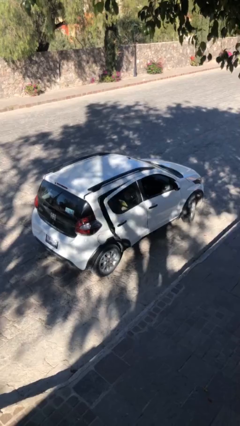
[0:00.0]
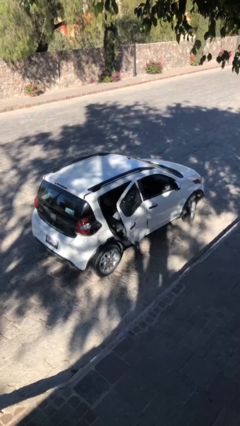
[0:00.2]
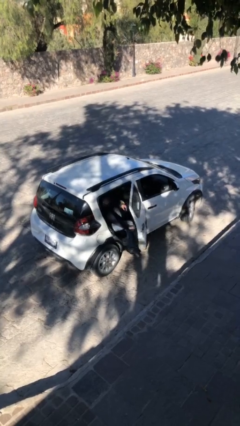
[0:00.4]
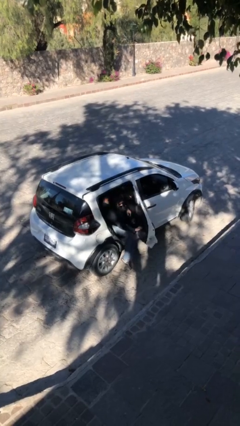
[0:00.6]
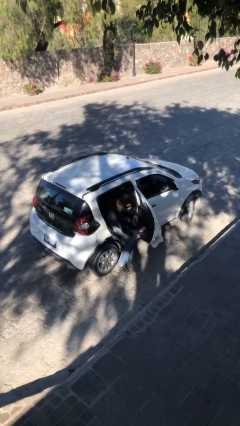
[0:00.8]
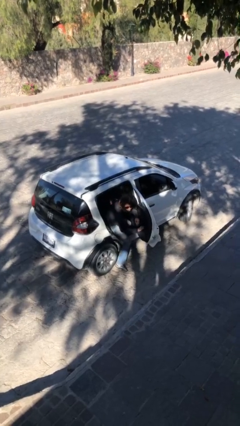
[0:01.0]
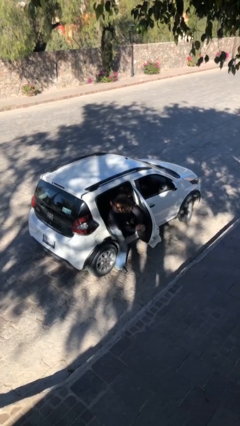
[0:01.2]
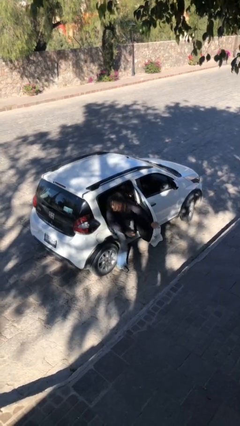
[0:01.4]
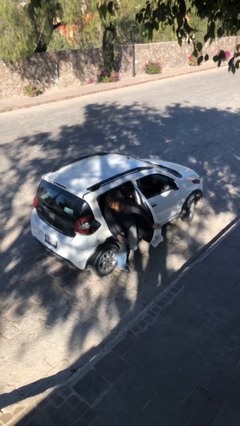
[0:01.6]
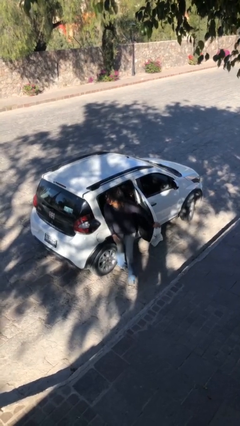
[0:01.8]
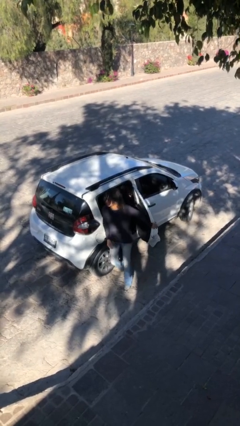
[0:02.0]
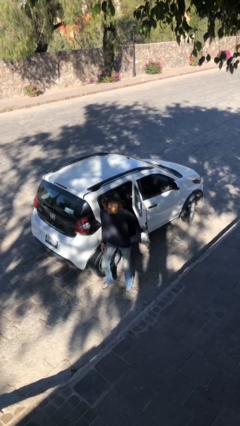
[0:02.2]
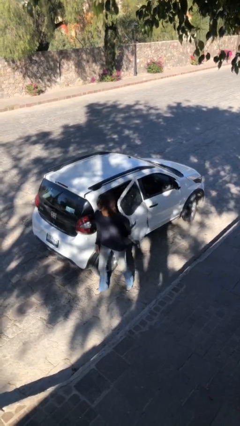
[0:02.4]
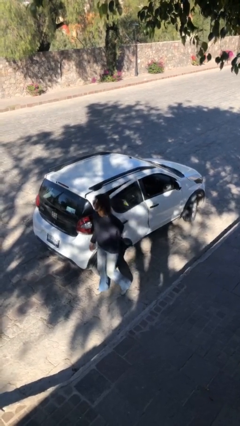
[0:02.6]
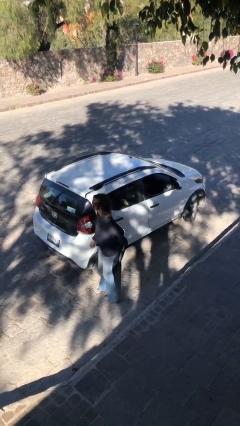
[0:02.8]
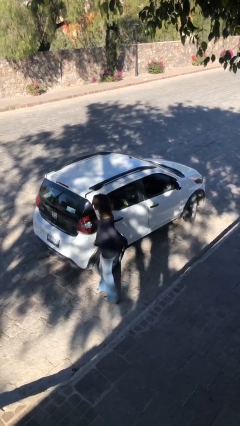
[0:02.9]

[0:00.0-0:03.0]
car drops off person

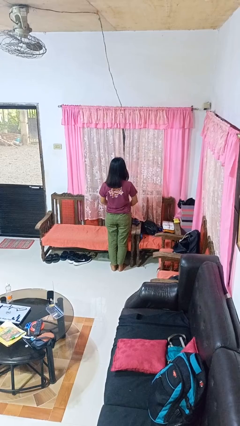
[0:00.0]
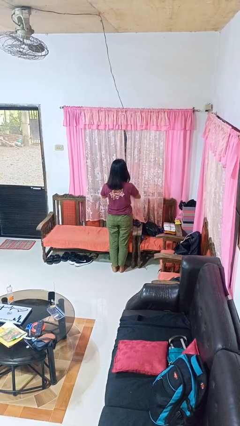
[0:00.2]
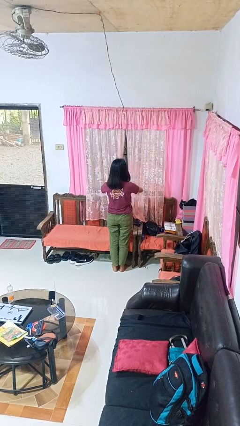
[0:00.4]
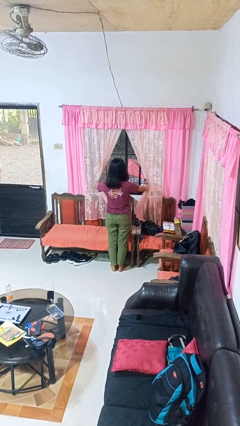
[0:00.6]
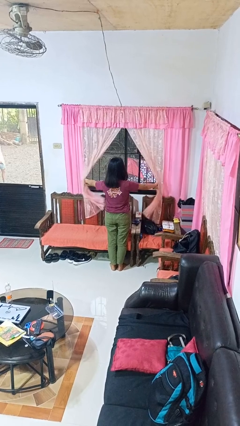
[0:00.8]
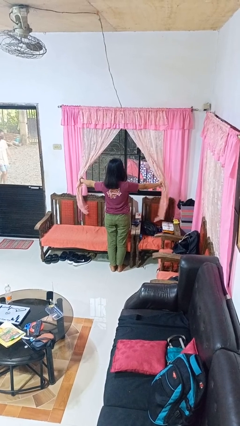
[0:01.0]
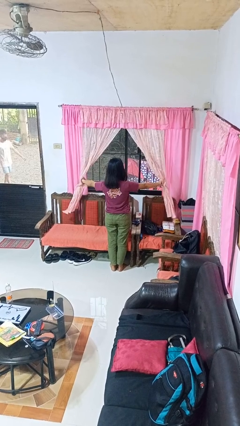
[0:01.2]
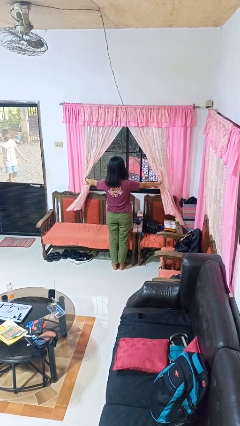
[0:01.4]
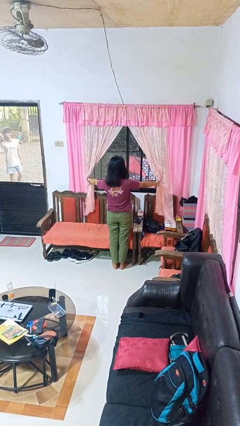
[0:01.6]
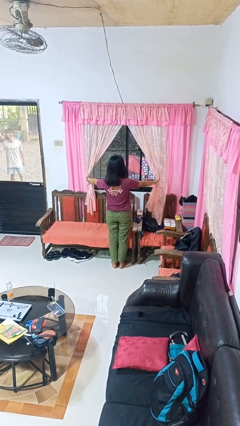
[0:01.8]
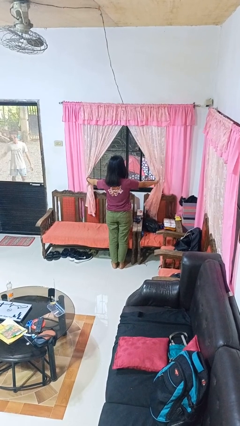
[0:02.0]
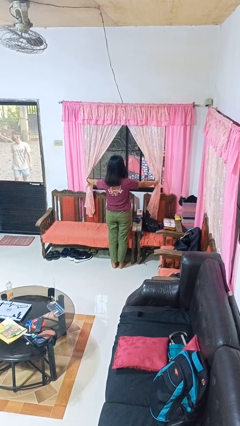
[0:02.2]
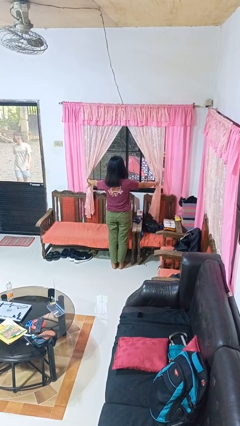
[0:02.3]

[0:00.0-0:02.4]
person opens curtains

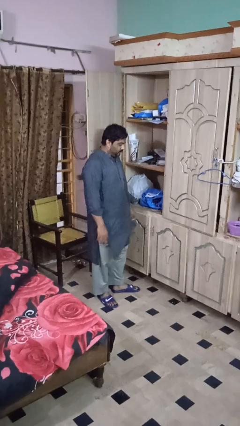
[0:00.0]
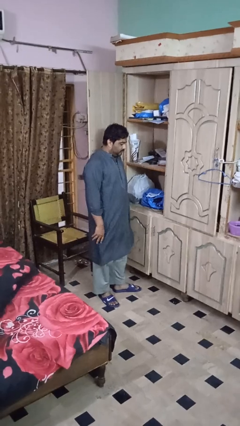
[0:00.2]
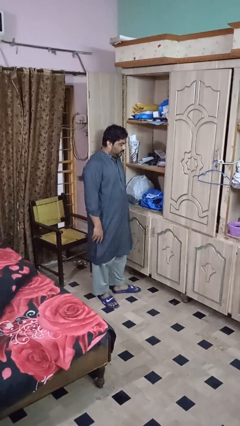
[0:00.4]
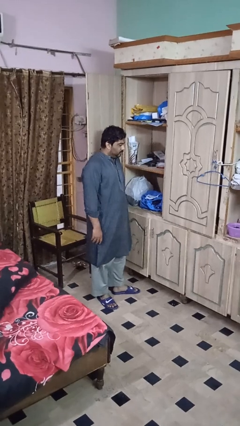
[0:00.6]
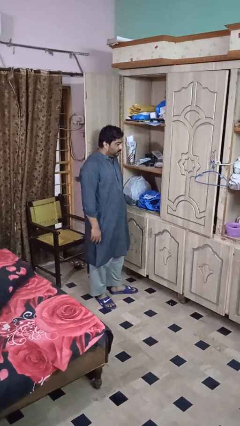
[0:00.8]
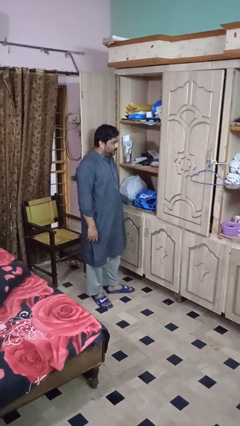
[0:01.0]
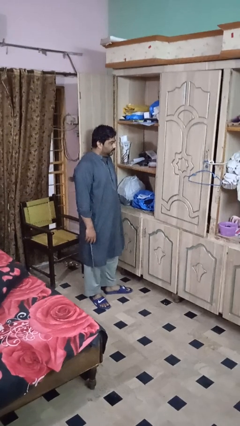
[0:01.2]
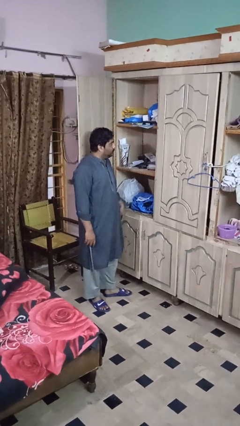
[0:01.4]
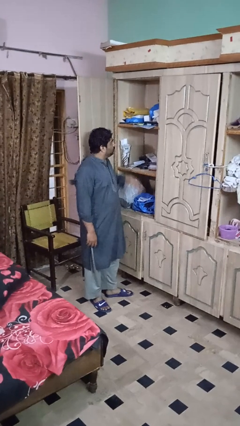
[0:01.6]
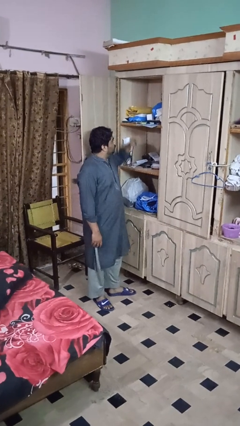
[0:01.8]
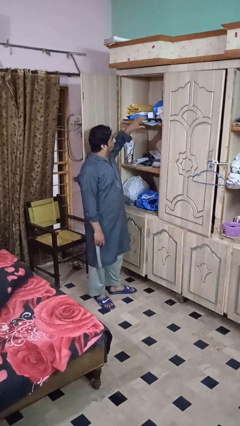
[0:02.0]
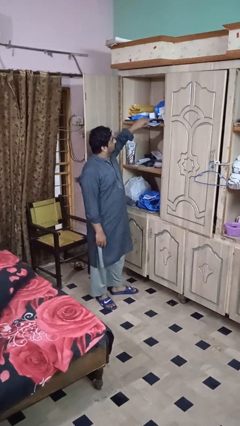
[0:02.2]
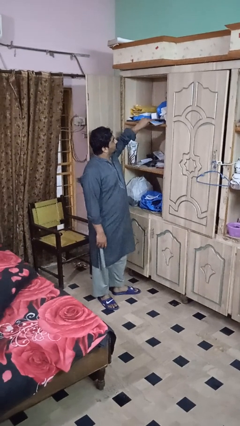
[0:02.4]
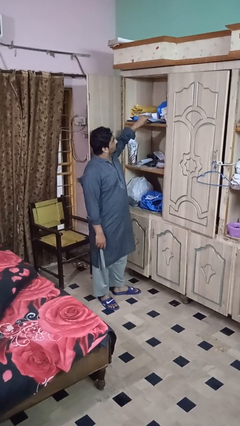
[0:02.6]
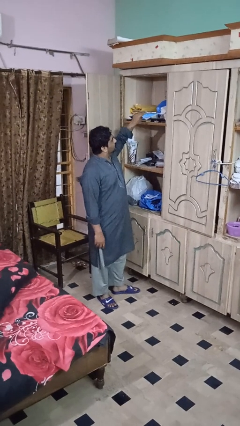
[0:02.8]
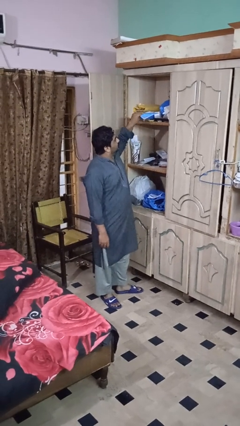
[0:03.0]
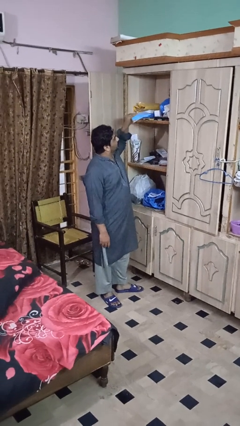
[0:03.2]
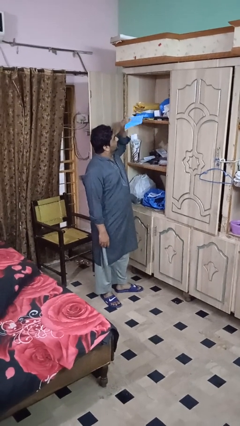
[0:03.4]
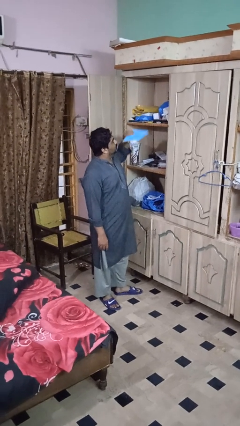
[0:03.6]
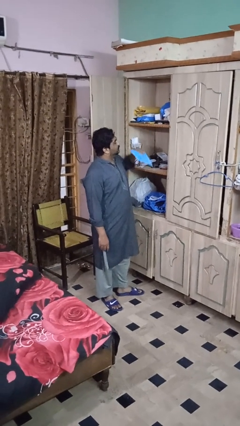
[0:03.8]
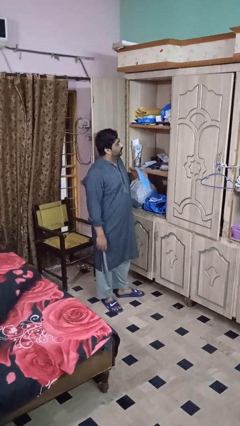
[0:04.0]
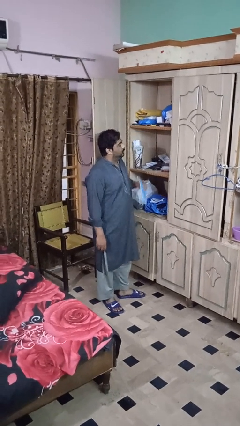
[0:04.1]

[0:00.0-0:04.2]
person picks up object from shelf

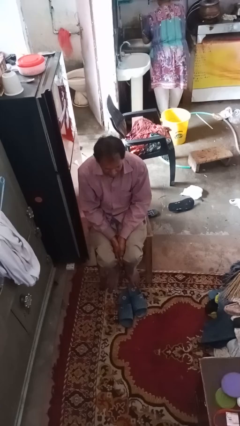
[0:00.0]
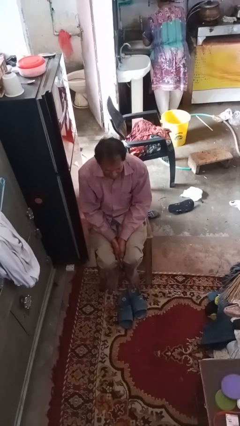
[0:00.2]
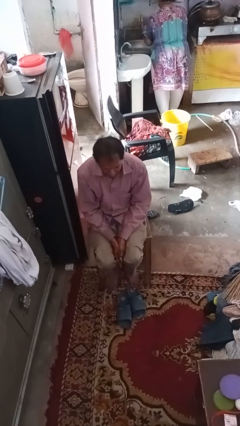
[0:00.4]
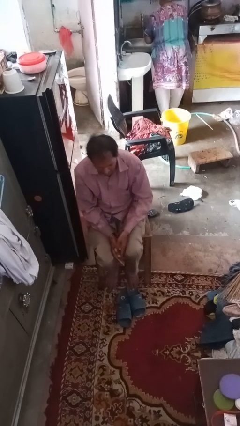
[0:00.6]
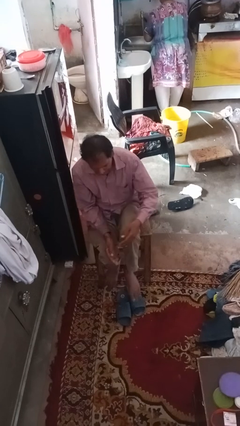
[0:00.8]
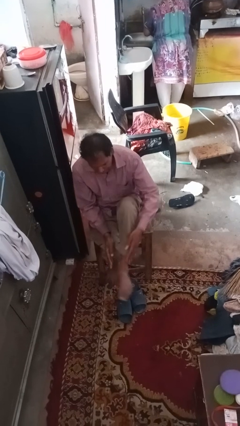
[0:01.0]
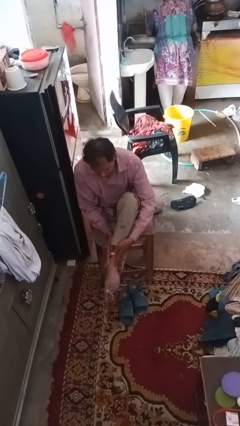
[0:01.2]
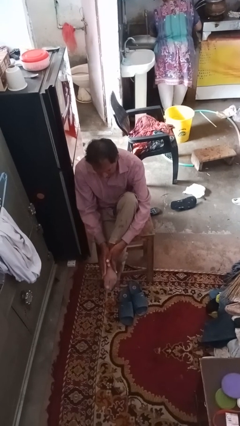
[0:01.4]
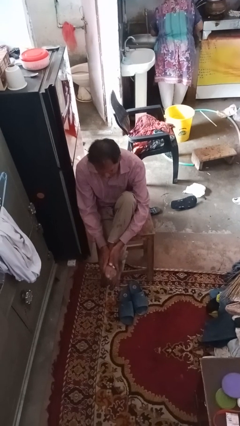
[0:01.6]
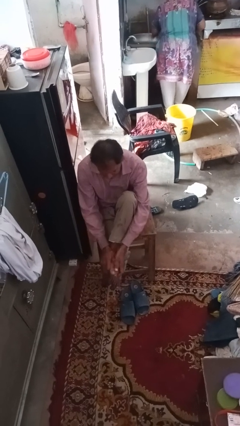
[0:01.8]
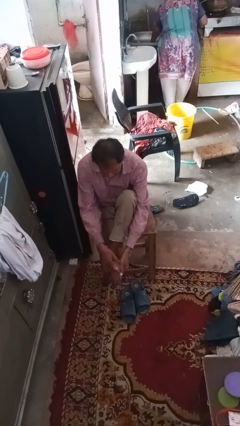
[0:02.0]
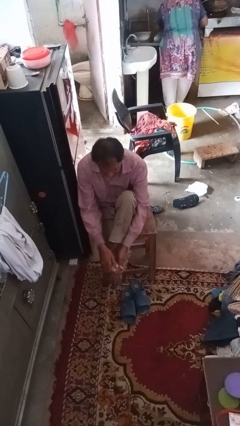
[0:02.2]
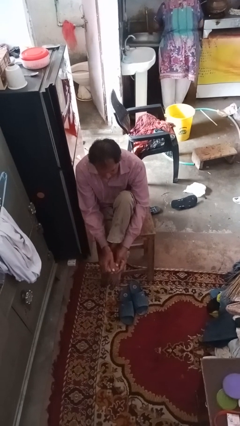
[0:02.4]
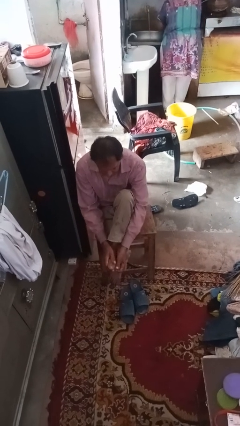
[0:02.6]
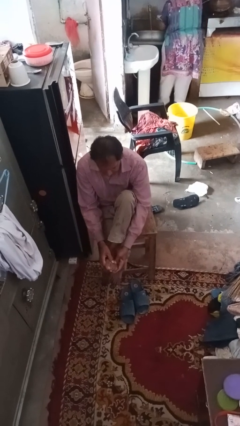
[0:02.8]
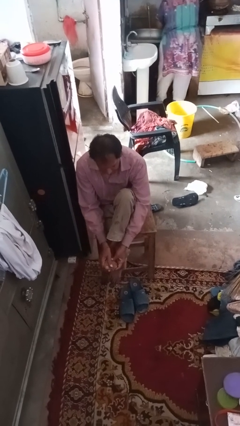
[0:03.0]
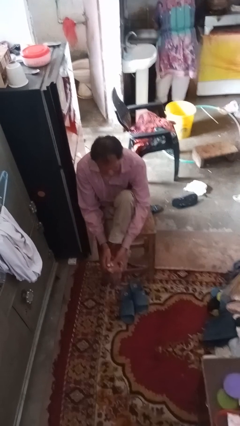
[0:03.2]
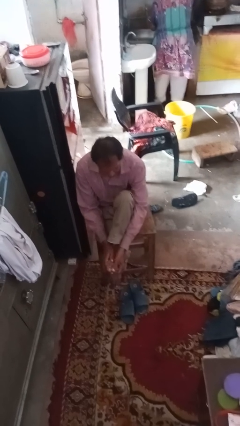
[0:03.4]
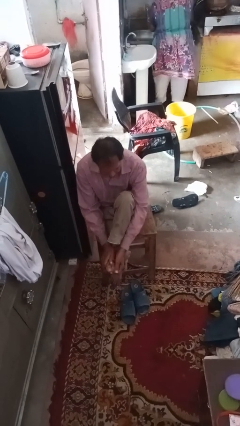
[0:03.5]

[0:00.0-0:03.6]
person rubs foot

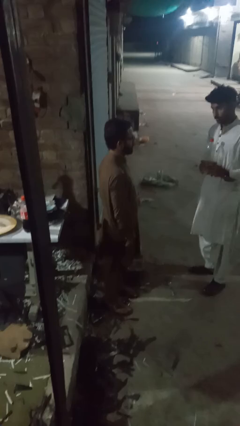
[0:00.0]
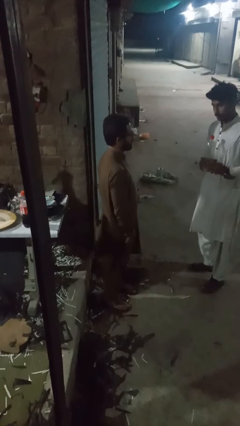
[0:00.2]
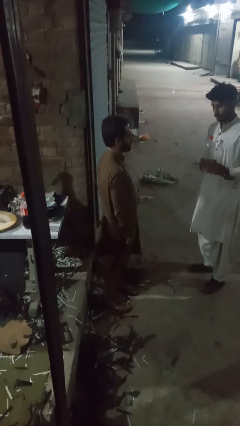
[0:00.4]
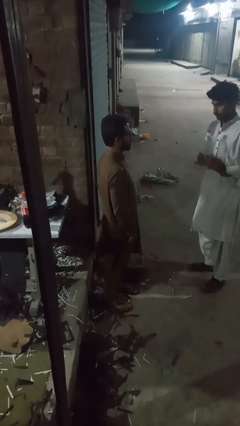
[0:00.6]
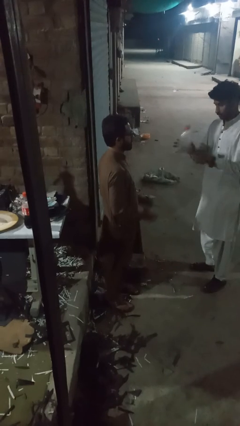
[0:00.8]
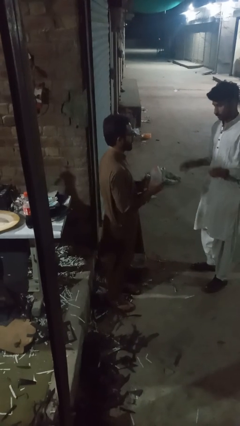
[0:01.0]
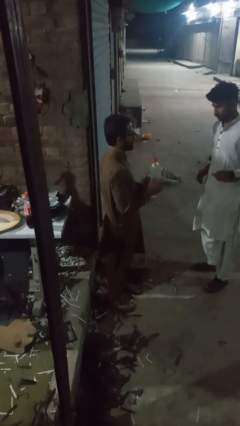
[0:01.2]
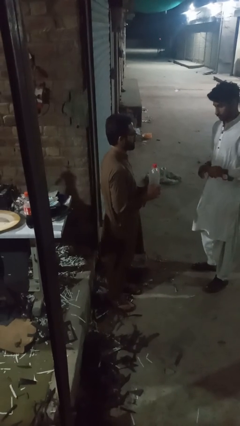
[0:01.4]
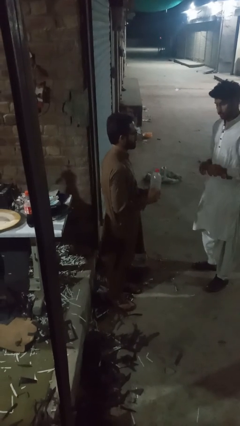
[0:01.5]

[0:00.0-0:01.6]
person catches object from person

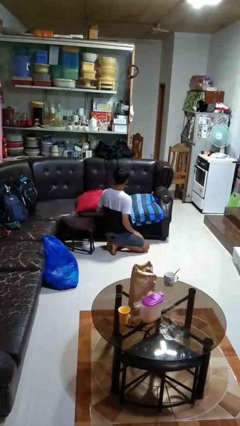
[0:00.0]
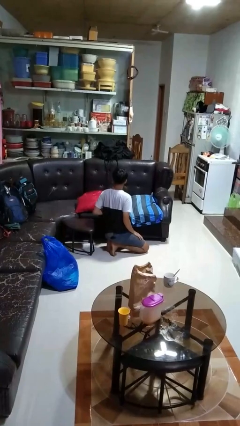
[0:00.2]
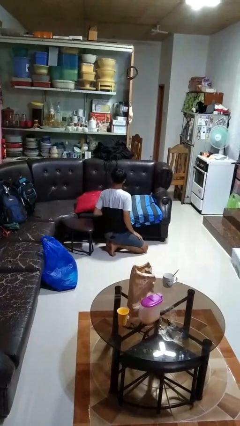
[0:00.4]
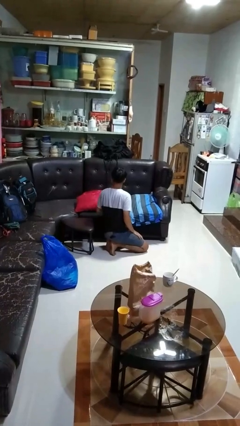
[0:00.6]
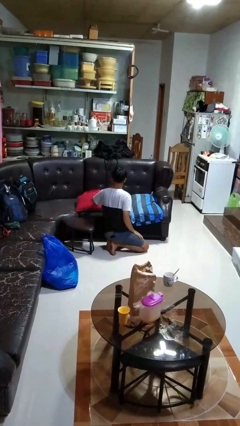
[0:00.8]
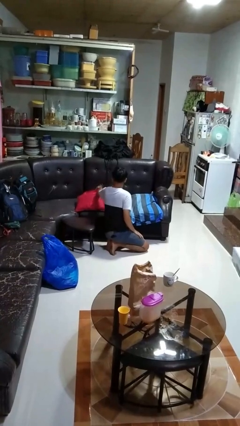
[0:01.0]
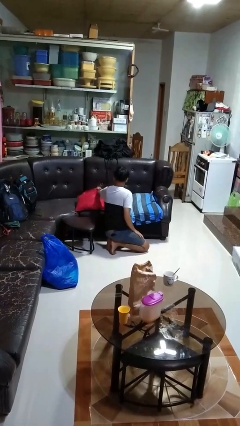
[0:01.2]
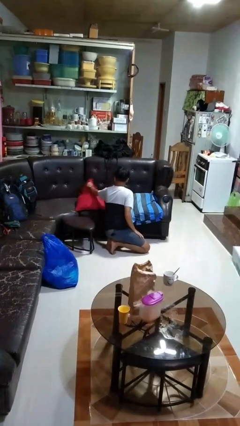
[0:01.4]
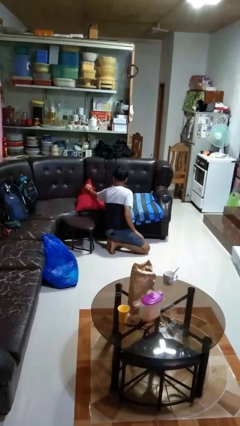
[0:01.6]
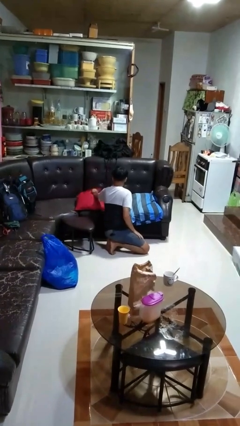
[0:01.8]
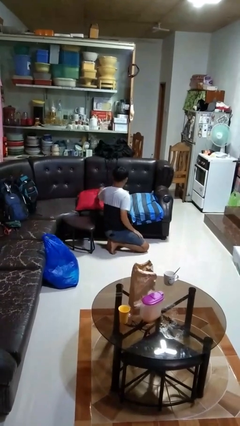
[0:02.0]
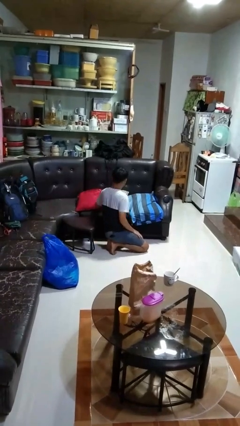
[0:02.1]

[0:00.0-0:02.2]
person searches in couch

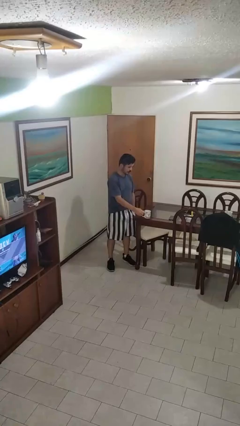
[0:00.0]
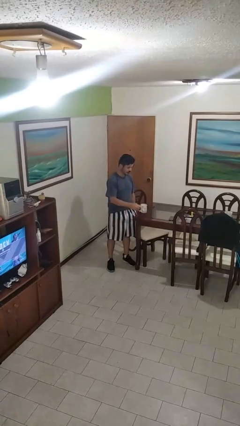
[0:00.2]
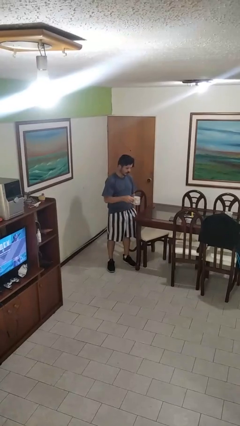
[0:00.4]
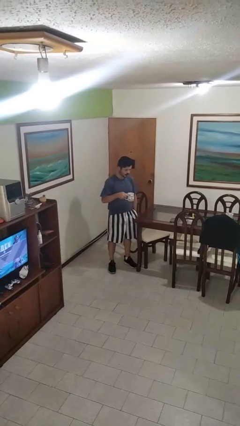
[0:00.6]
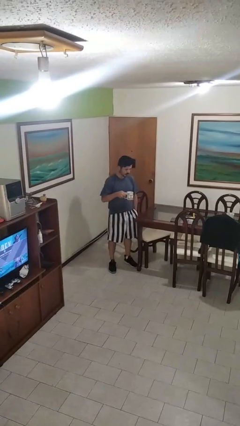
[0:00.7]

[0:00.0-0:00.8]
person picks up object from table
